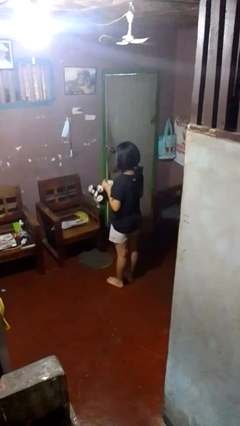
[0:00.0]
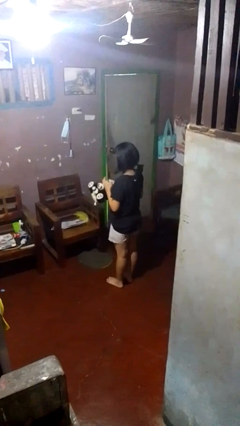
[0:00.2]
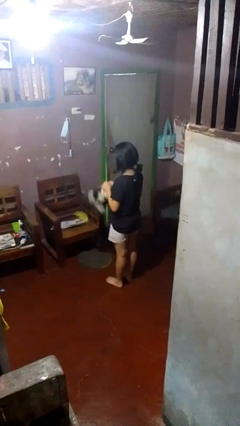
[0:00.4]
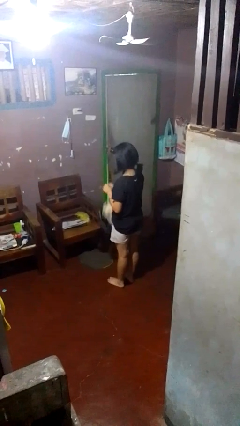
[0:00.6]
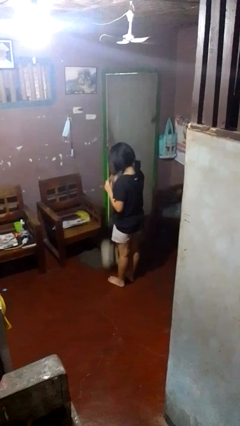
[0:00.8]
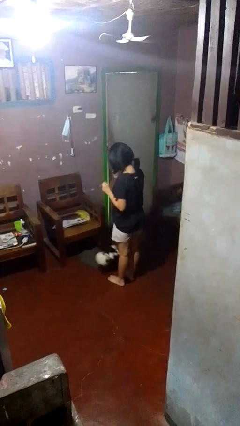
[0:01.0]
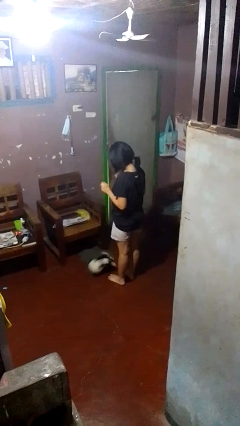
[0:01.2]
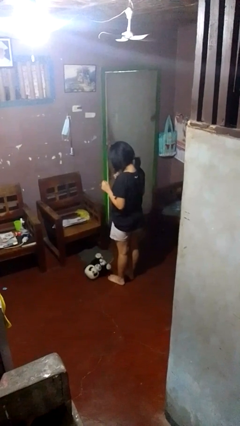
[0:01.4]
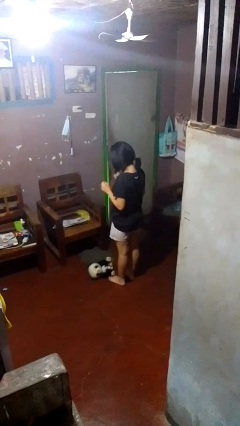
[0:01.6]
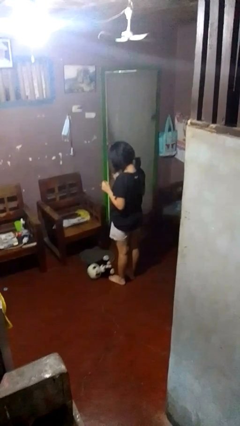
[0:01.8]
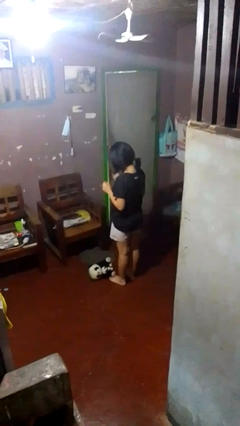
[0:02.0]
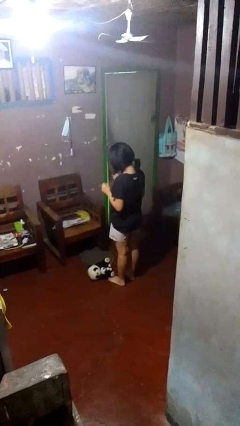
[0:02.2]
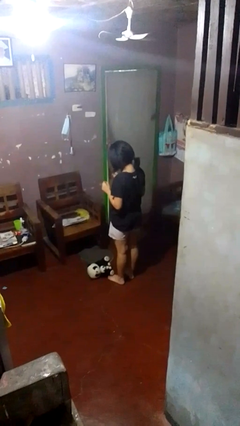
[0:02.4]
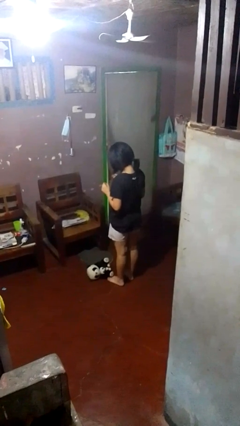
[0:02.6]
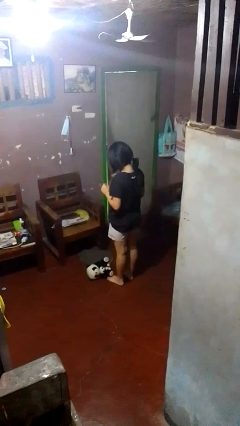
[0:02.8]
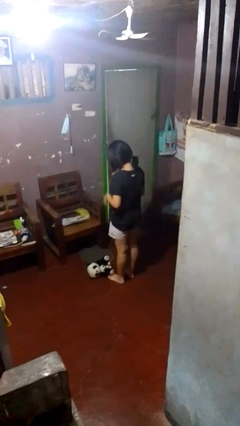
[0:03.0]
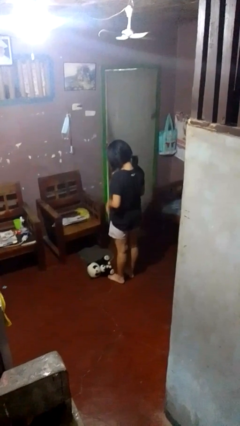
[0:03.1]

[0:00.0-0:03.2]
person drops object

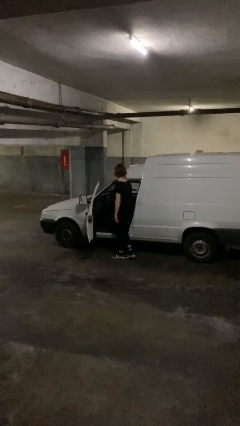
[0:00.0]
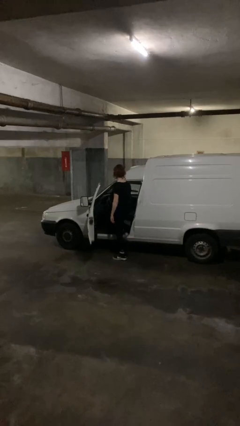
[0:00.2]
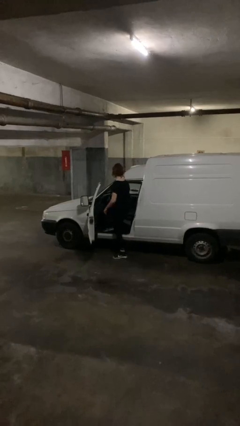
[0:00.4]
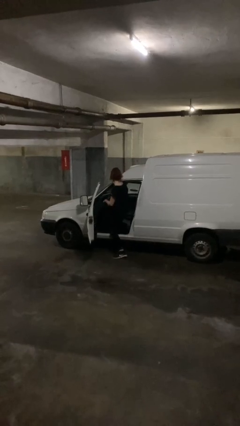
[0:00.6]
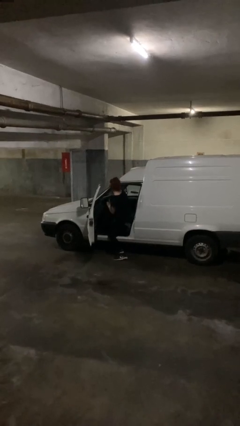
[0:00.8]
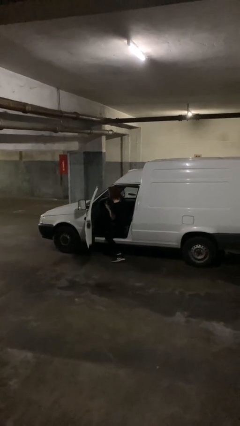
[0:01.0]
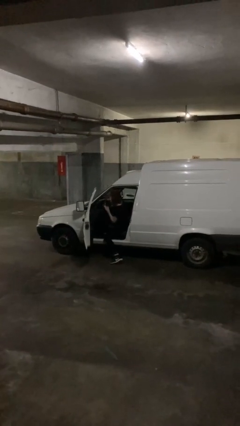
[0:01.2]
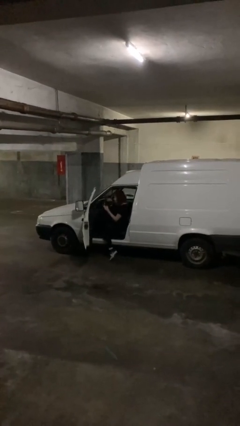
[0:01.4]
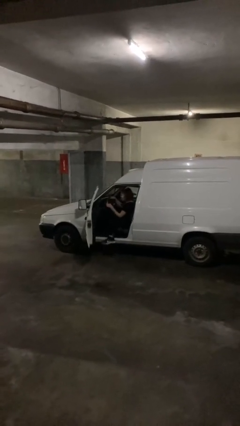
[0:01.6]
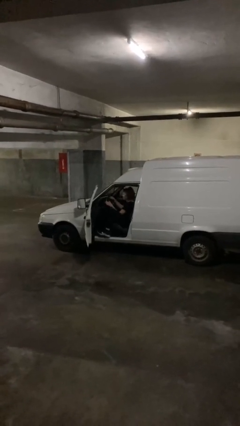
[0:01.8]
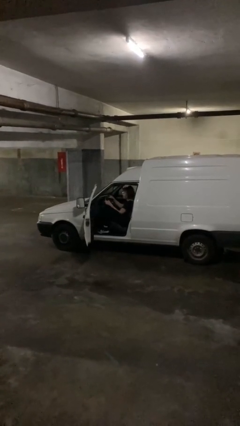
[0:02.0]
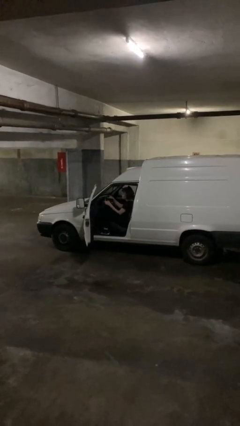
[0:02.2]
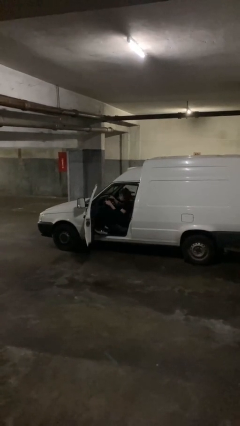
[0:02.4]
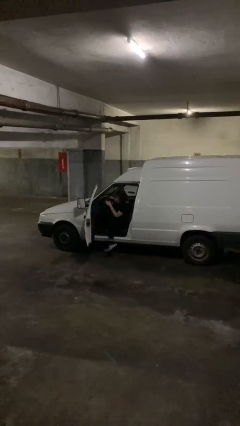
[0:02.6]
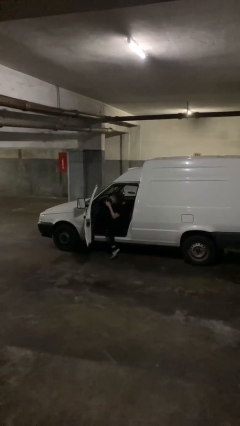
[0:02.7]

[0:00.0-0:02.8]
person enters car

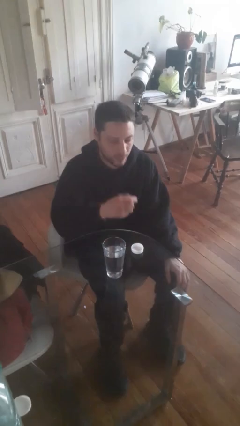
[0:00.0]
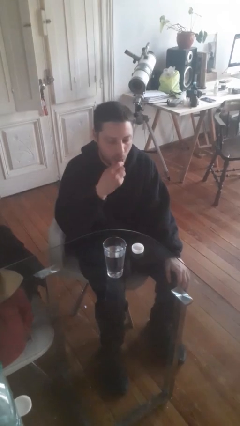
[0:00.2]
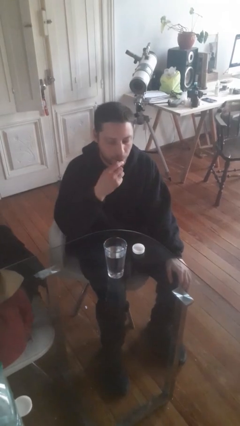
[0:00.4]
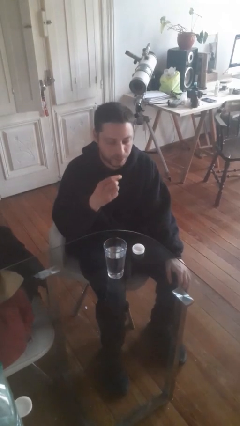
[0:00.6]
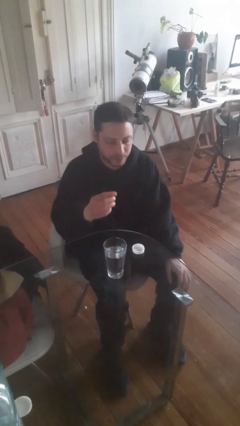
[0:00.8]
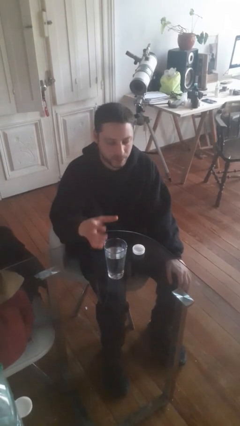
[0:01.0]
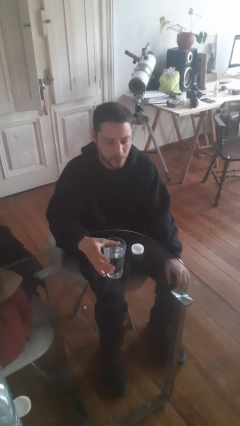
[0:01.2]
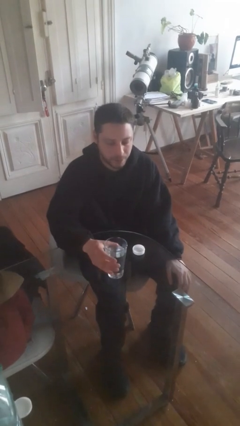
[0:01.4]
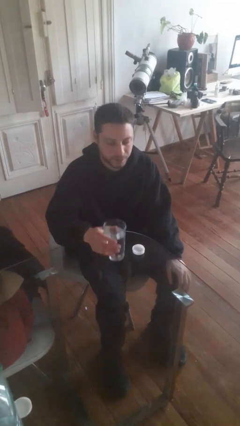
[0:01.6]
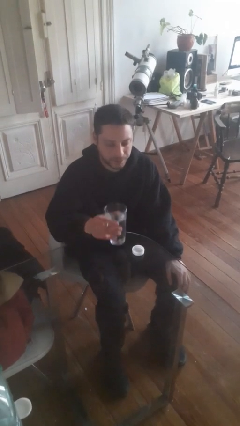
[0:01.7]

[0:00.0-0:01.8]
person takes medicine pills

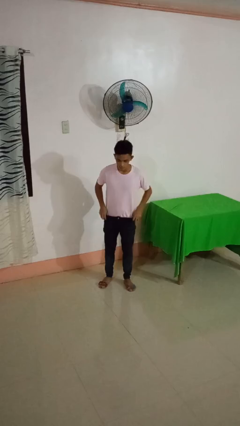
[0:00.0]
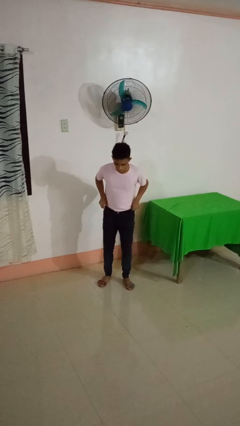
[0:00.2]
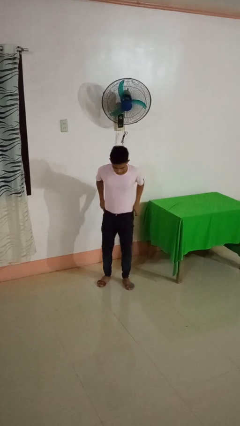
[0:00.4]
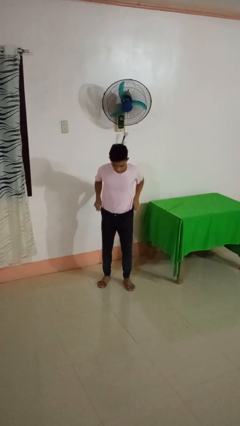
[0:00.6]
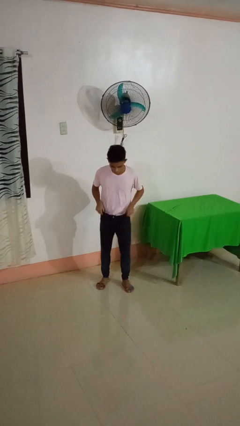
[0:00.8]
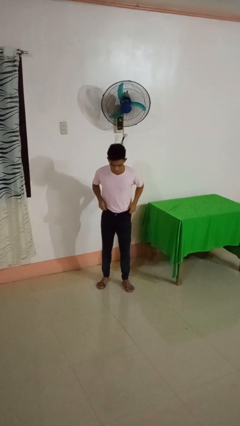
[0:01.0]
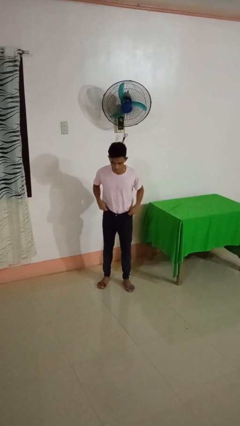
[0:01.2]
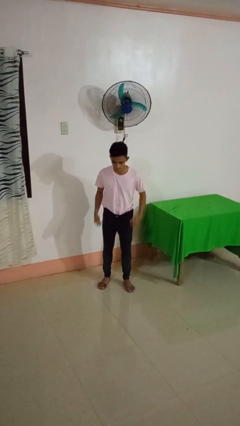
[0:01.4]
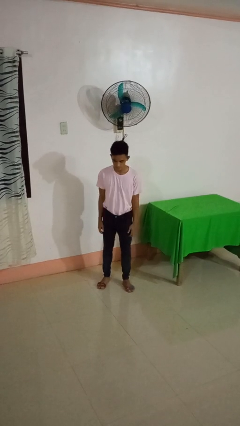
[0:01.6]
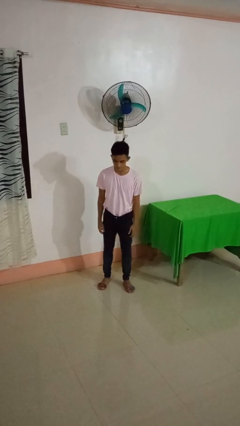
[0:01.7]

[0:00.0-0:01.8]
person hikes up pants

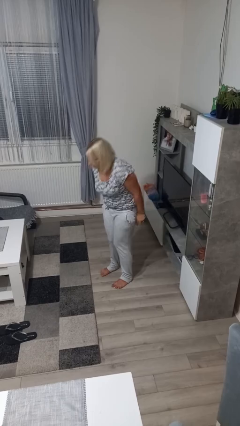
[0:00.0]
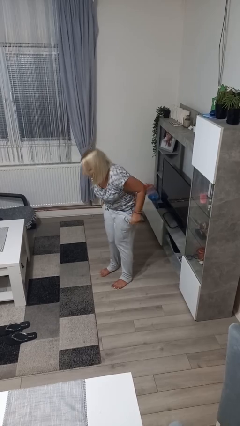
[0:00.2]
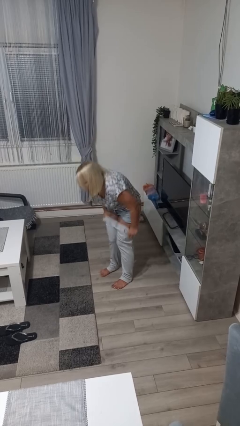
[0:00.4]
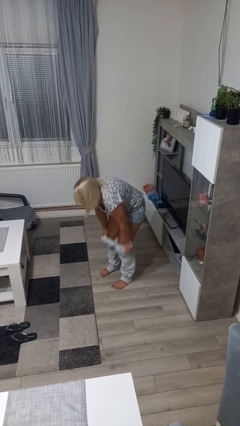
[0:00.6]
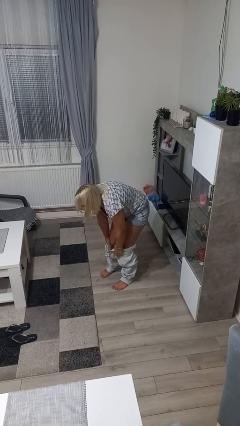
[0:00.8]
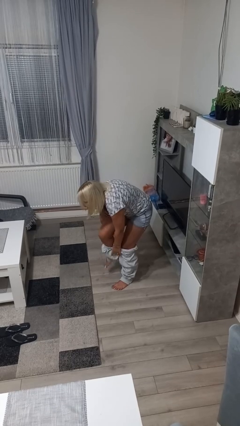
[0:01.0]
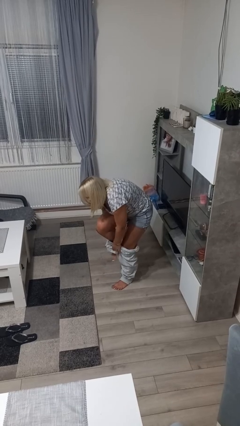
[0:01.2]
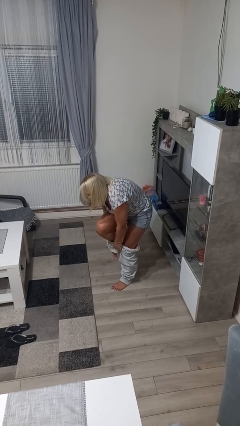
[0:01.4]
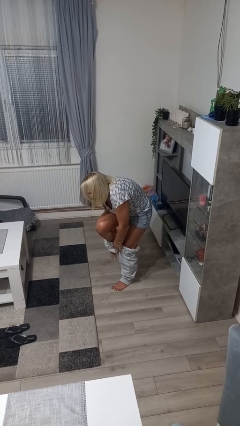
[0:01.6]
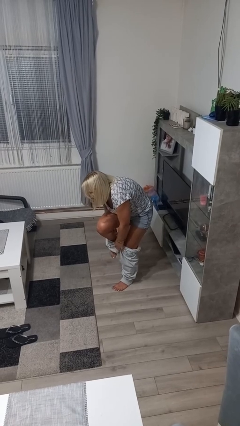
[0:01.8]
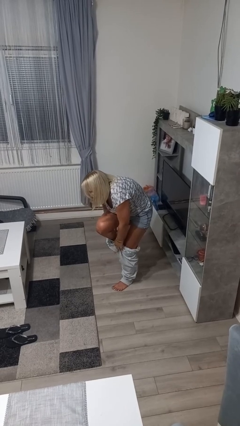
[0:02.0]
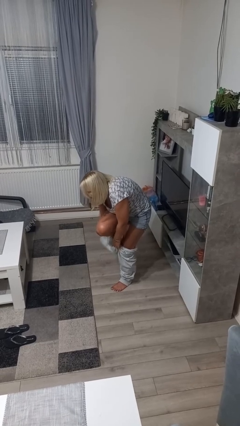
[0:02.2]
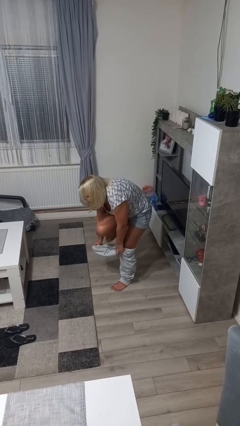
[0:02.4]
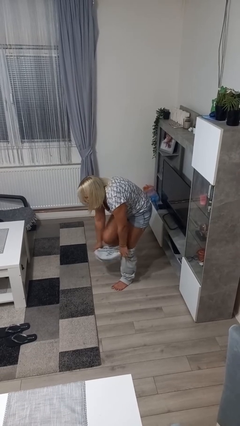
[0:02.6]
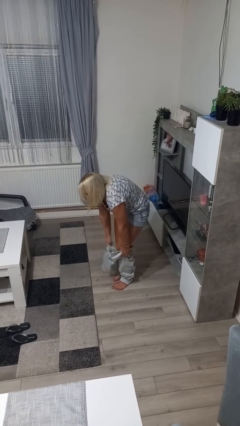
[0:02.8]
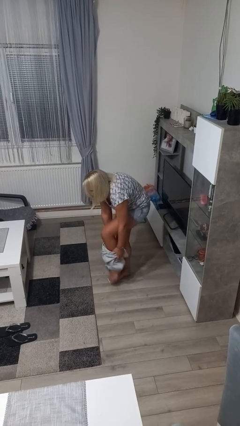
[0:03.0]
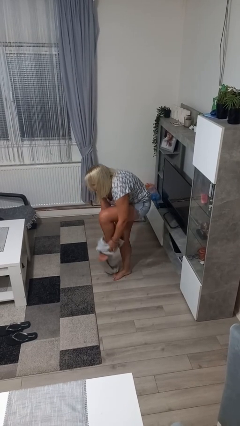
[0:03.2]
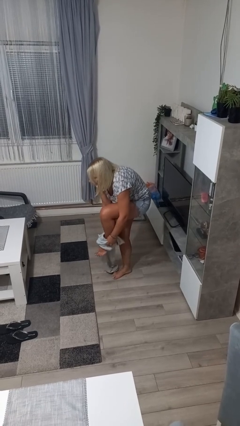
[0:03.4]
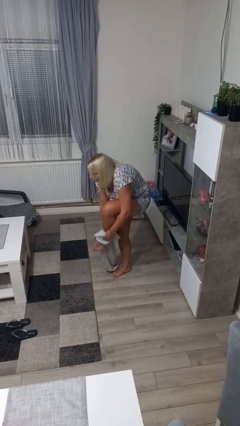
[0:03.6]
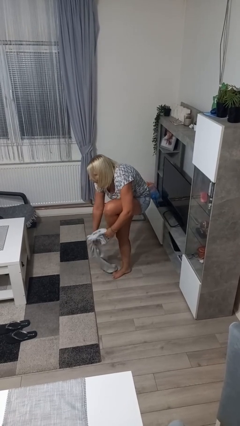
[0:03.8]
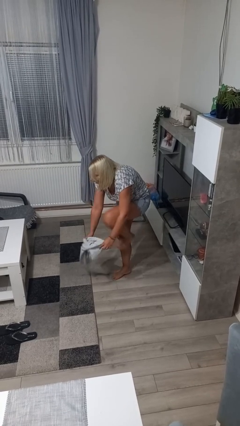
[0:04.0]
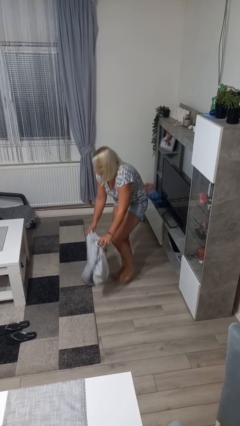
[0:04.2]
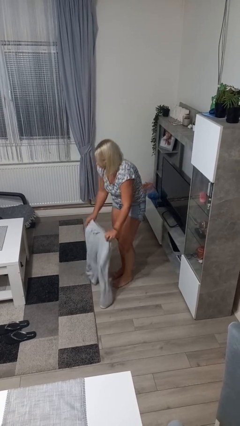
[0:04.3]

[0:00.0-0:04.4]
person takes off pants

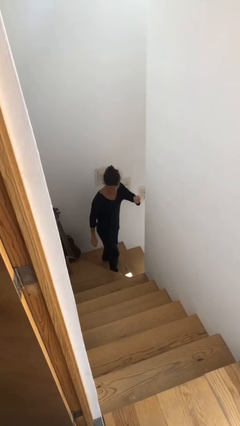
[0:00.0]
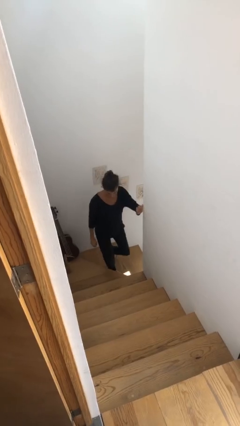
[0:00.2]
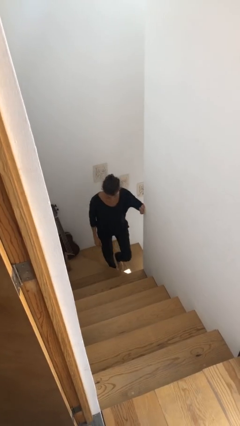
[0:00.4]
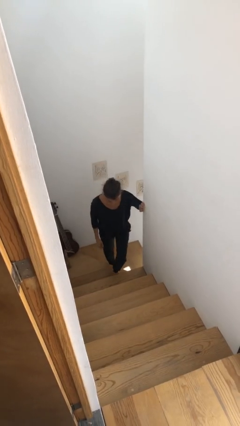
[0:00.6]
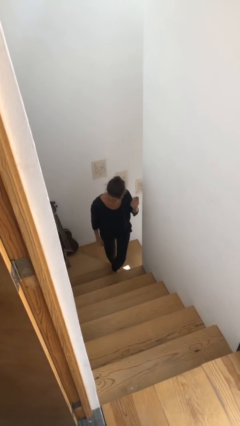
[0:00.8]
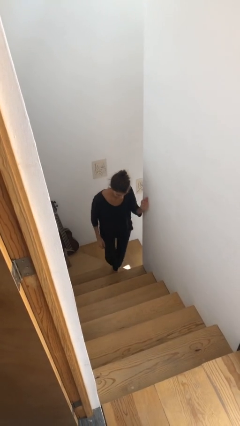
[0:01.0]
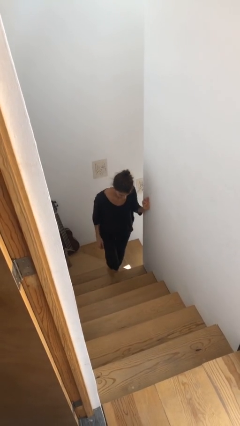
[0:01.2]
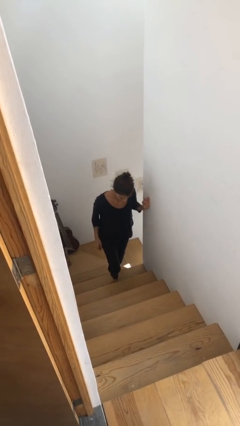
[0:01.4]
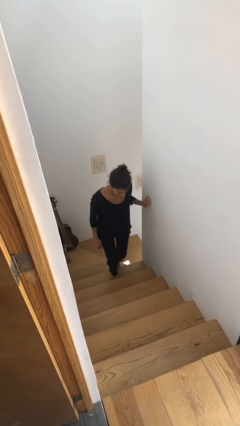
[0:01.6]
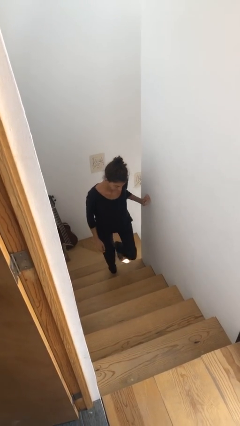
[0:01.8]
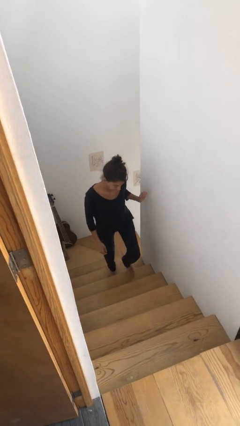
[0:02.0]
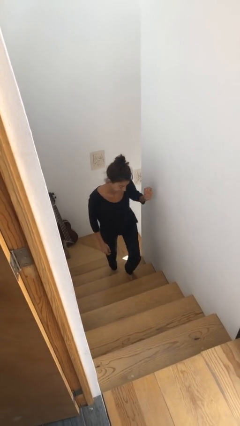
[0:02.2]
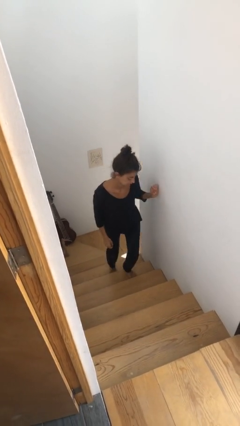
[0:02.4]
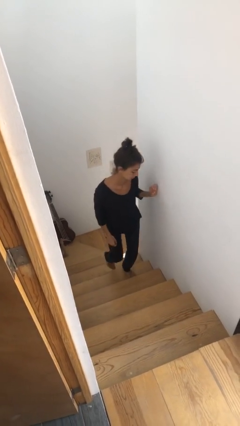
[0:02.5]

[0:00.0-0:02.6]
person climbs up stairs

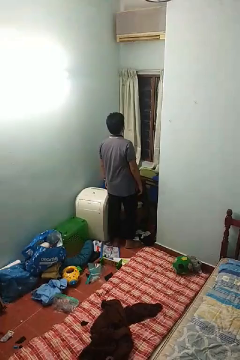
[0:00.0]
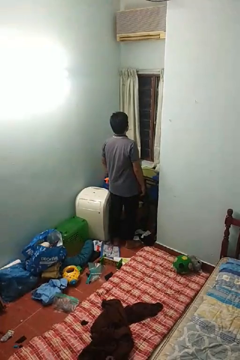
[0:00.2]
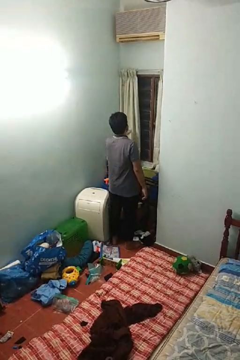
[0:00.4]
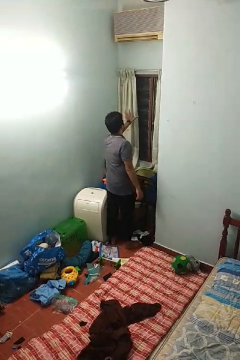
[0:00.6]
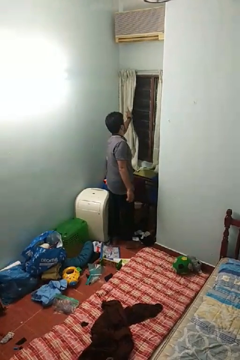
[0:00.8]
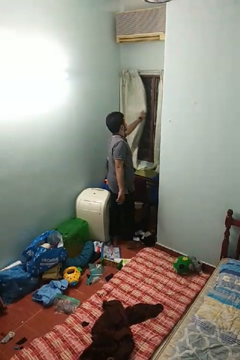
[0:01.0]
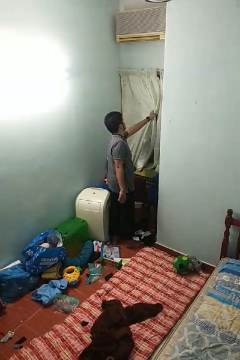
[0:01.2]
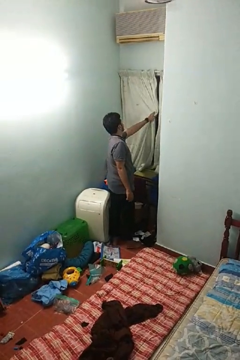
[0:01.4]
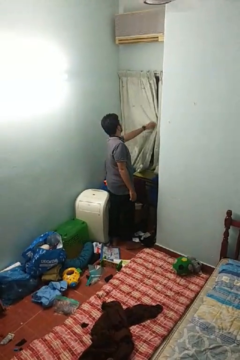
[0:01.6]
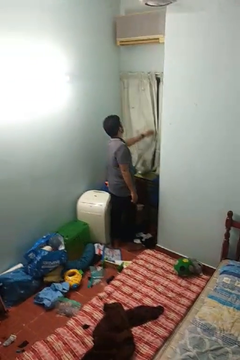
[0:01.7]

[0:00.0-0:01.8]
person closes curtains
